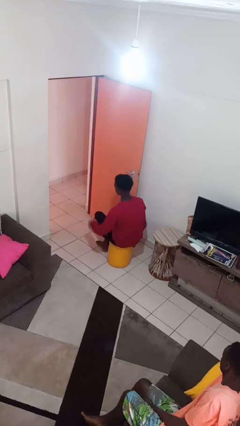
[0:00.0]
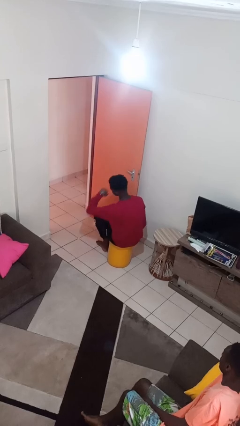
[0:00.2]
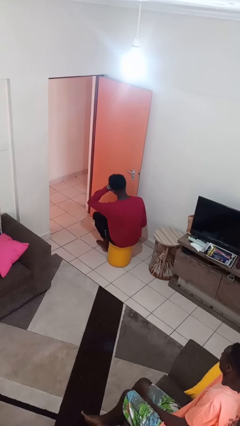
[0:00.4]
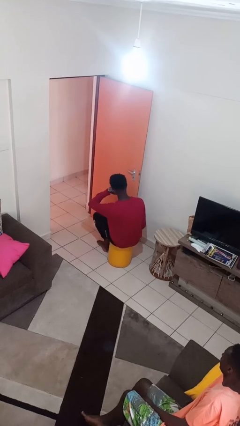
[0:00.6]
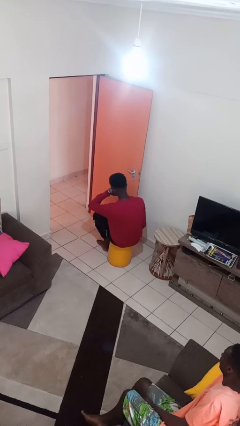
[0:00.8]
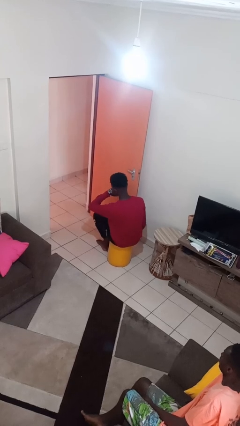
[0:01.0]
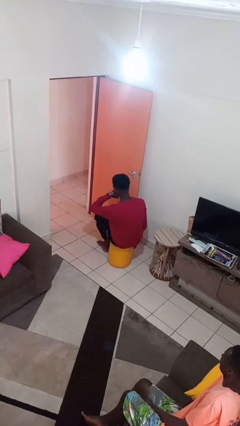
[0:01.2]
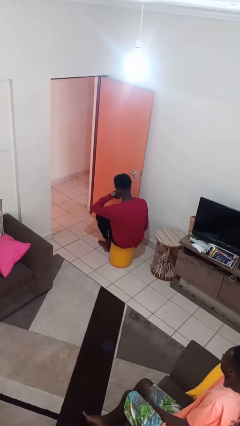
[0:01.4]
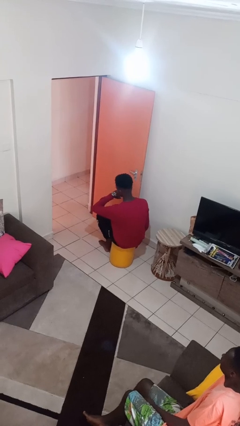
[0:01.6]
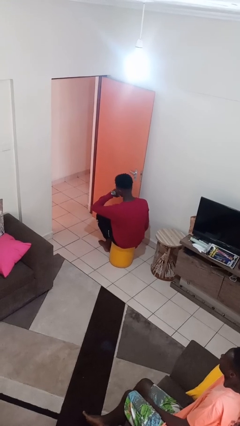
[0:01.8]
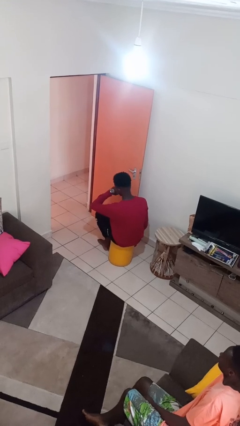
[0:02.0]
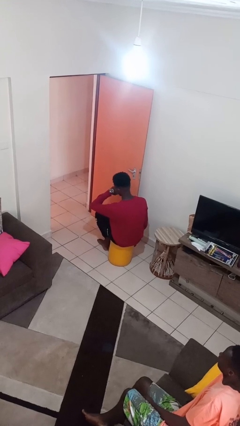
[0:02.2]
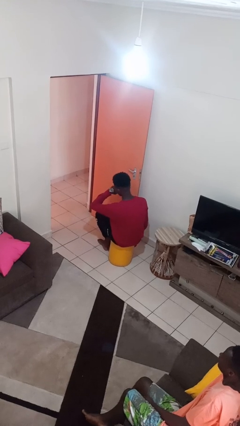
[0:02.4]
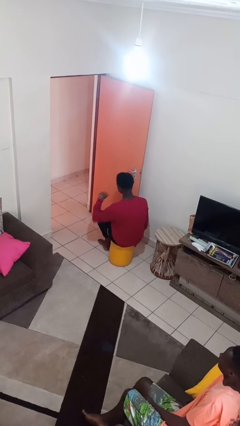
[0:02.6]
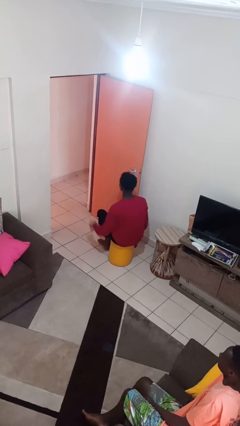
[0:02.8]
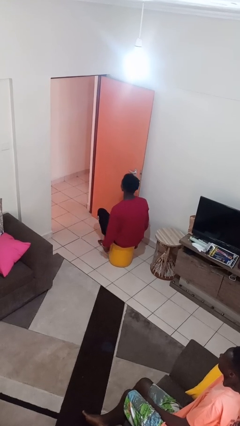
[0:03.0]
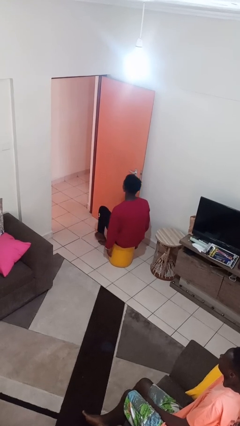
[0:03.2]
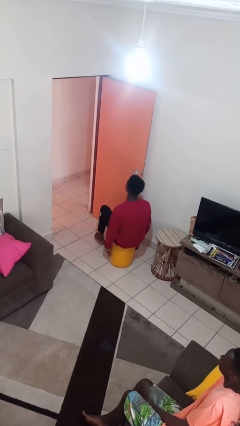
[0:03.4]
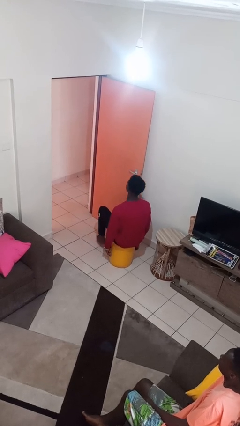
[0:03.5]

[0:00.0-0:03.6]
person looks at wristwatch

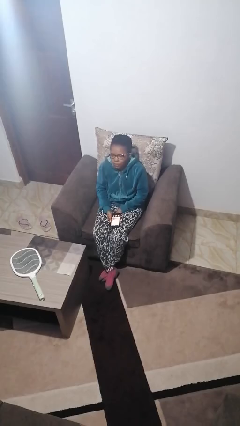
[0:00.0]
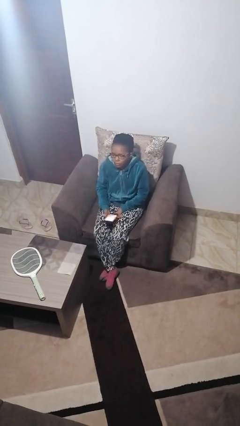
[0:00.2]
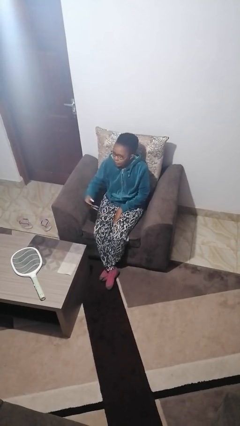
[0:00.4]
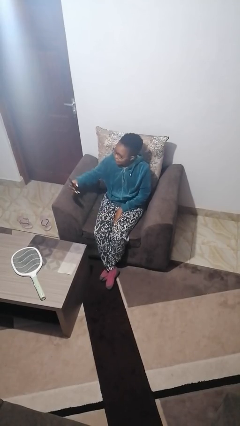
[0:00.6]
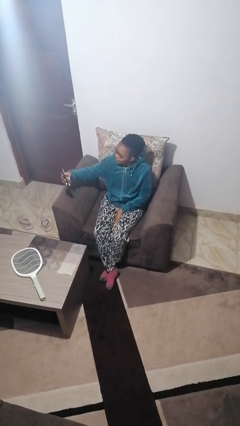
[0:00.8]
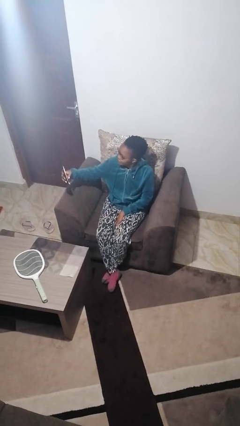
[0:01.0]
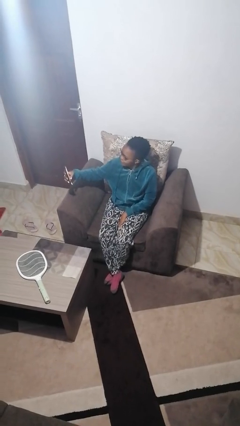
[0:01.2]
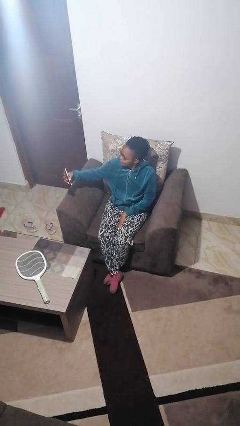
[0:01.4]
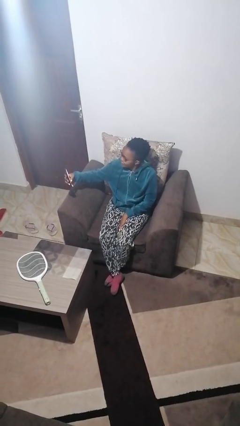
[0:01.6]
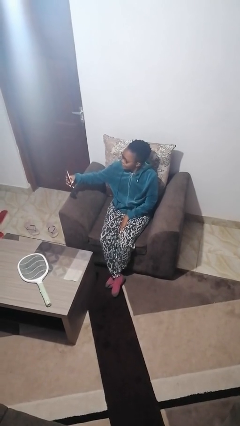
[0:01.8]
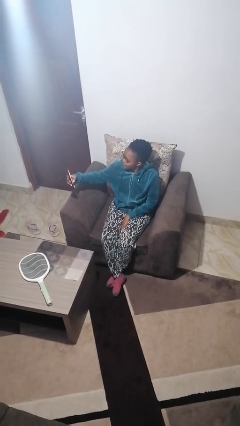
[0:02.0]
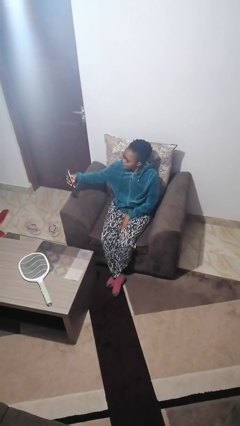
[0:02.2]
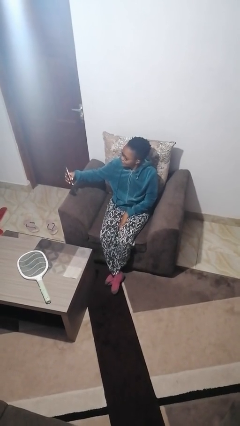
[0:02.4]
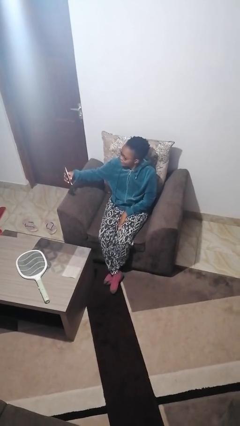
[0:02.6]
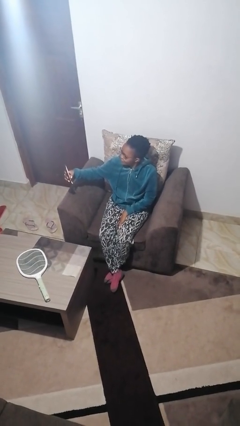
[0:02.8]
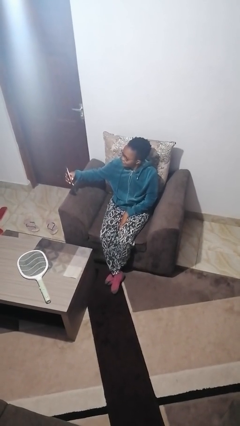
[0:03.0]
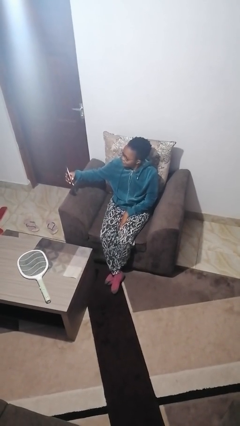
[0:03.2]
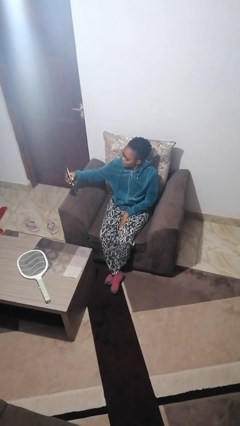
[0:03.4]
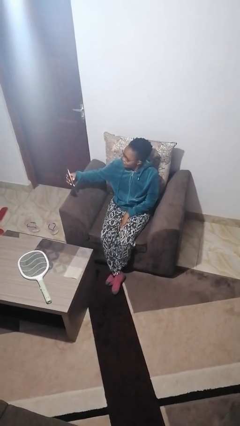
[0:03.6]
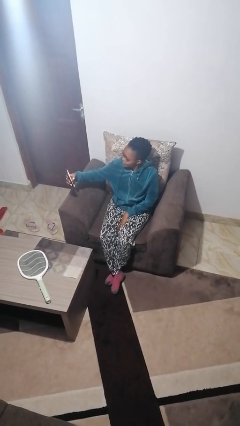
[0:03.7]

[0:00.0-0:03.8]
person takes selfie

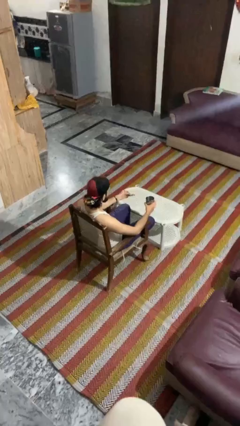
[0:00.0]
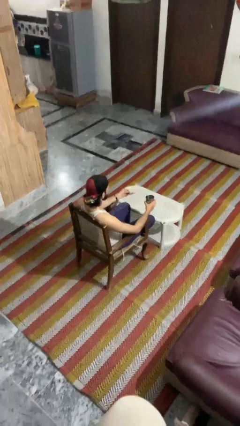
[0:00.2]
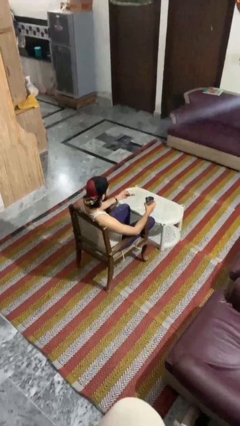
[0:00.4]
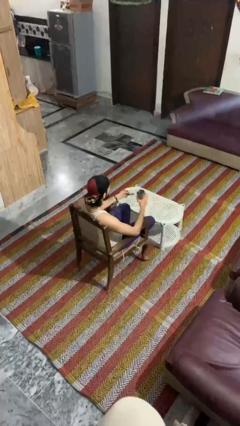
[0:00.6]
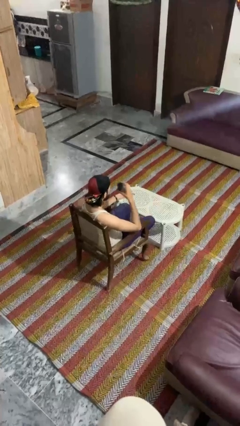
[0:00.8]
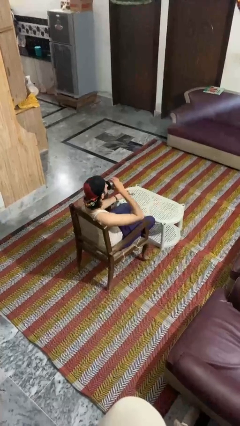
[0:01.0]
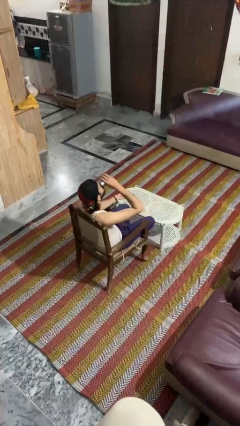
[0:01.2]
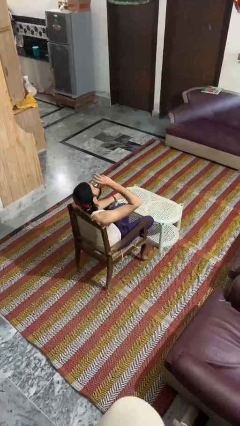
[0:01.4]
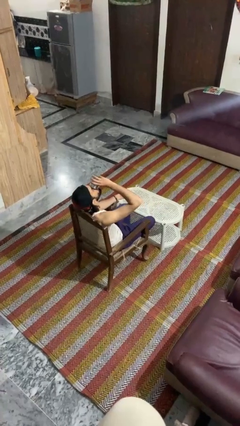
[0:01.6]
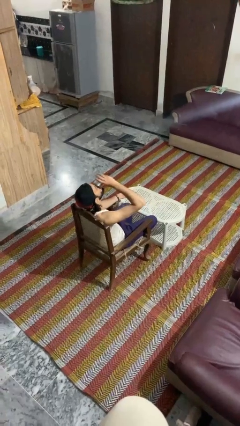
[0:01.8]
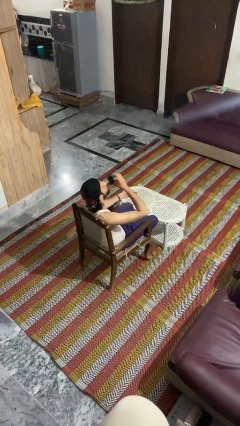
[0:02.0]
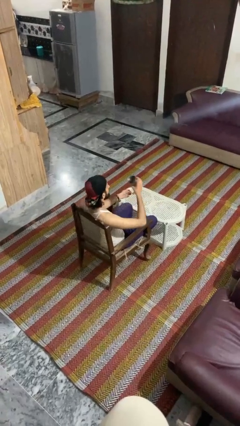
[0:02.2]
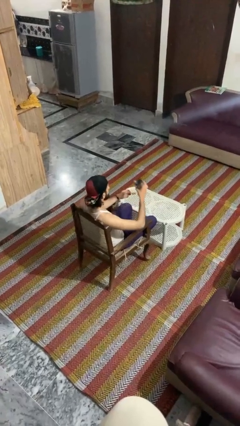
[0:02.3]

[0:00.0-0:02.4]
person drinks from mug

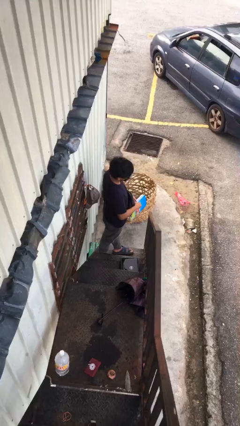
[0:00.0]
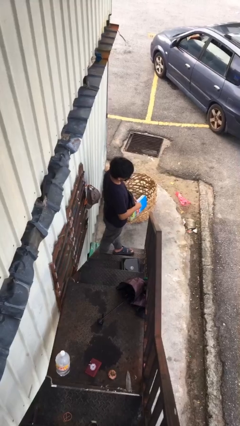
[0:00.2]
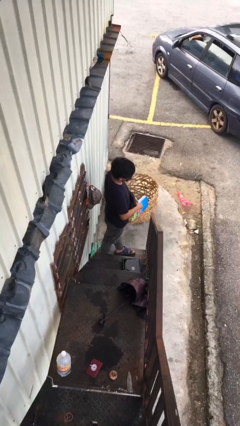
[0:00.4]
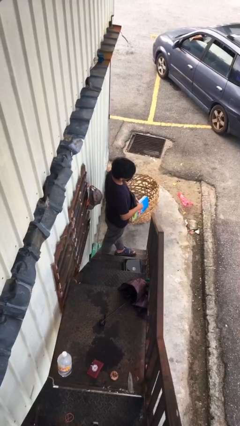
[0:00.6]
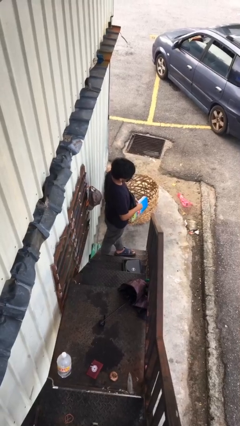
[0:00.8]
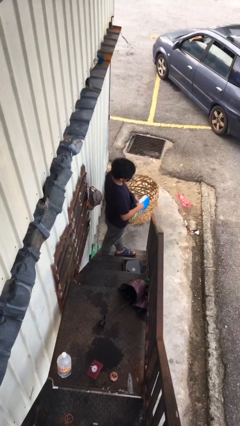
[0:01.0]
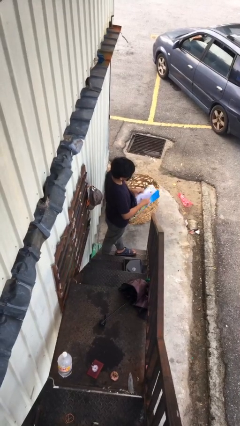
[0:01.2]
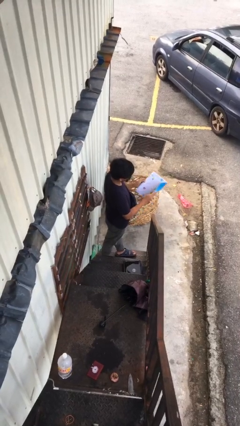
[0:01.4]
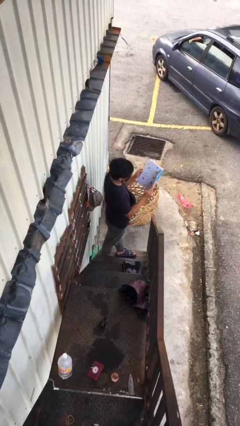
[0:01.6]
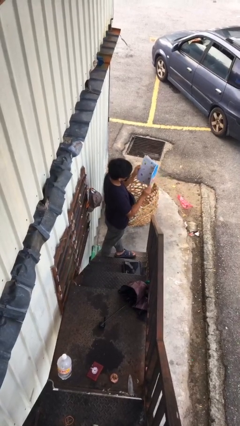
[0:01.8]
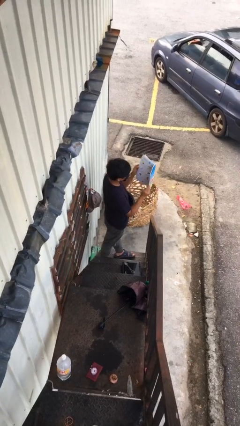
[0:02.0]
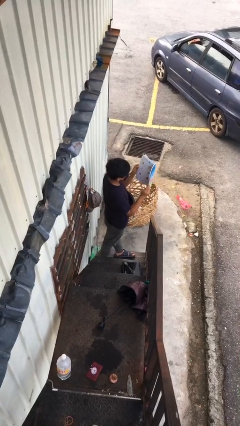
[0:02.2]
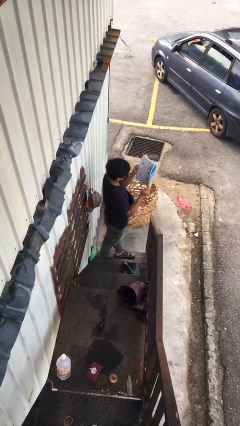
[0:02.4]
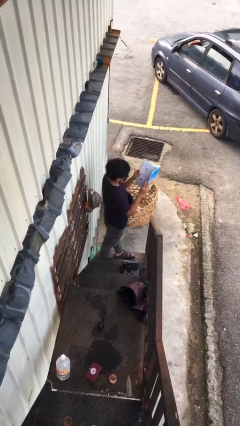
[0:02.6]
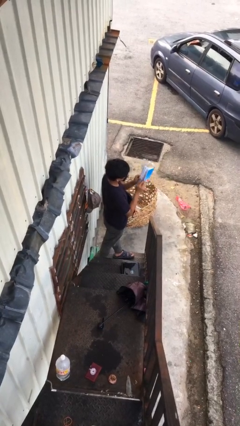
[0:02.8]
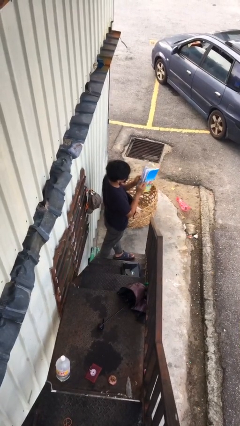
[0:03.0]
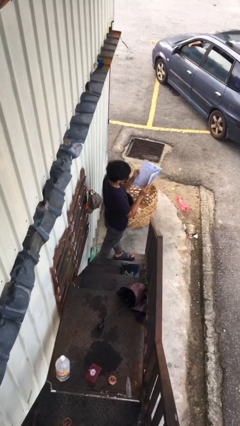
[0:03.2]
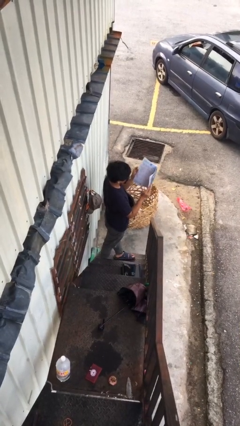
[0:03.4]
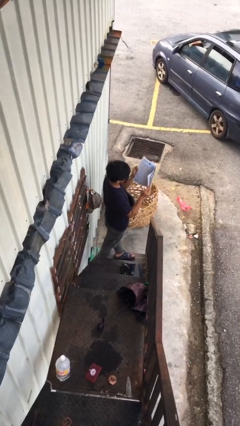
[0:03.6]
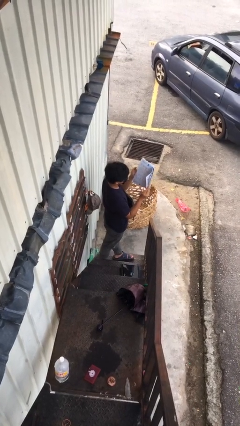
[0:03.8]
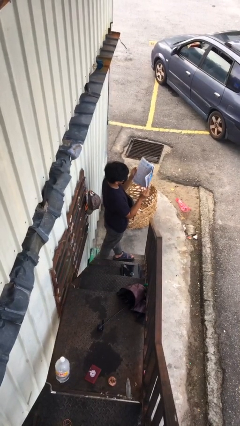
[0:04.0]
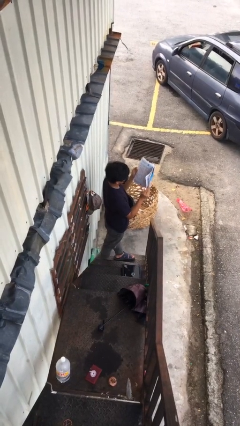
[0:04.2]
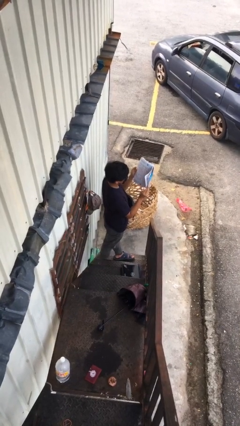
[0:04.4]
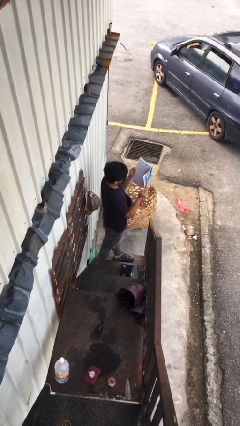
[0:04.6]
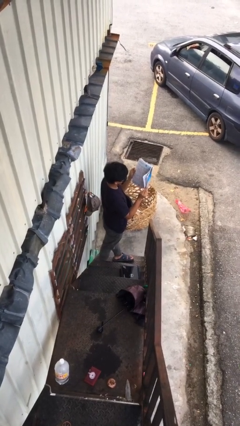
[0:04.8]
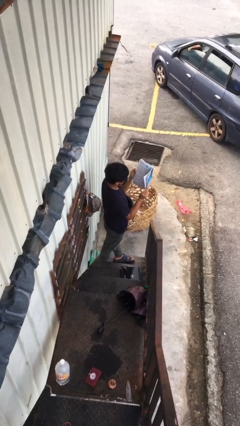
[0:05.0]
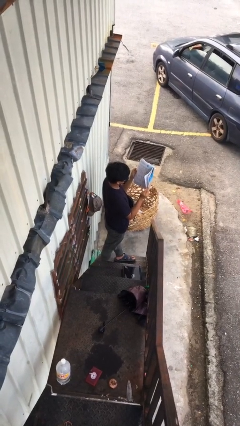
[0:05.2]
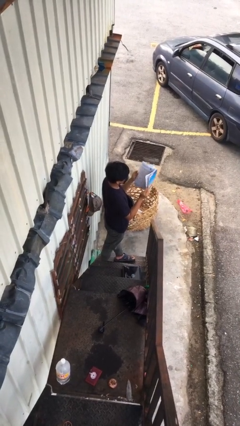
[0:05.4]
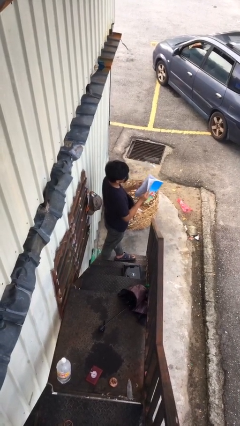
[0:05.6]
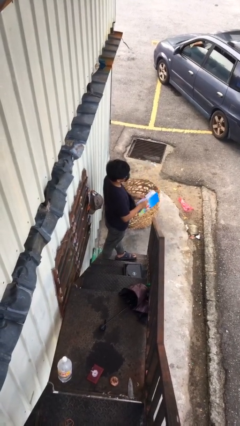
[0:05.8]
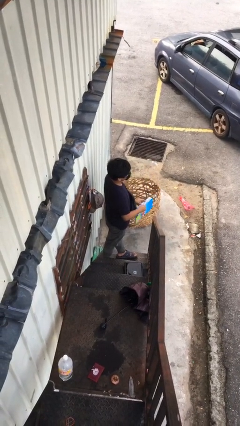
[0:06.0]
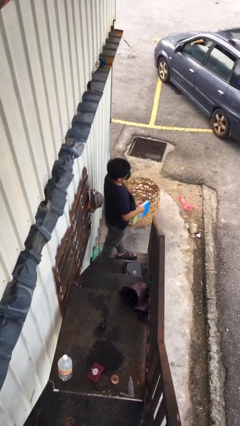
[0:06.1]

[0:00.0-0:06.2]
person reads document

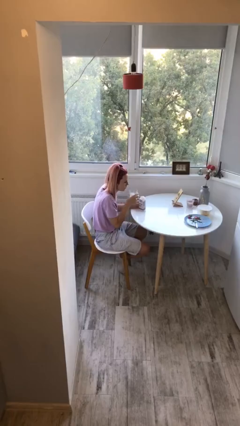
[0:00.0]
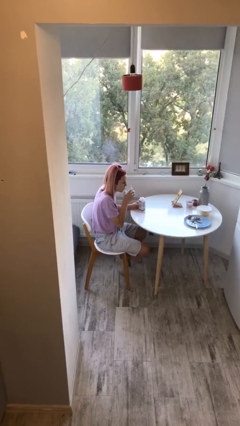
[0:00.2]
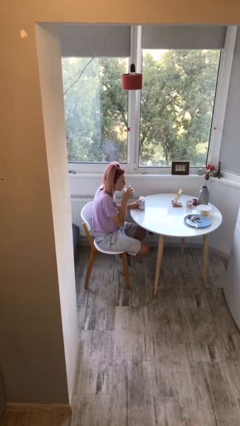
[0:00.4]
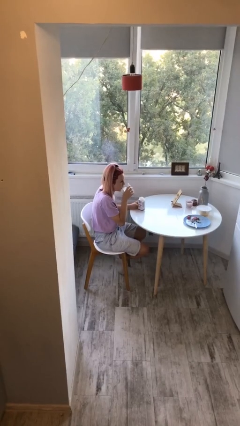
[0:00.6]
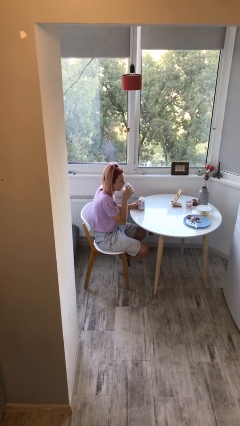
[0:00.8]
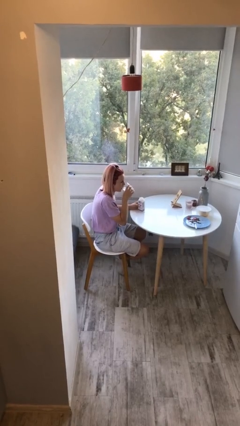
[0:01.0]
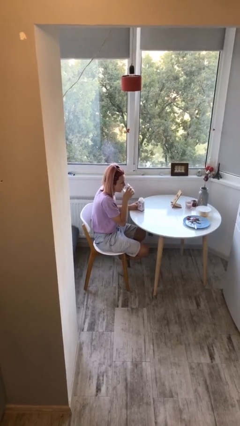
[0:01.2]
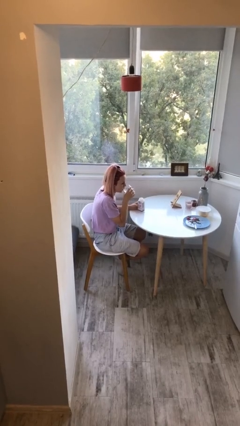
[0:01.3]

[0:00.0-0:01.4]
person drinks from cup
